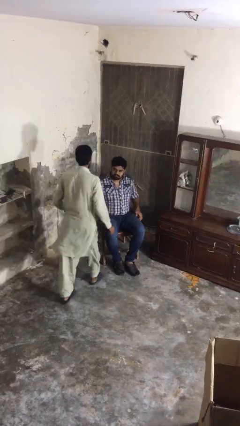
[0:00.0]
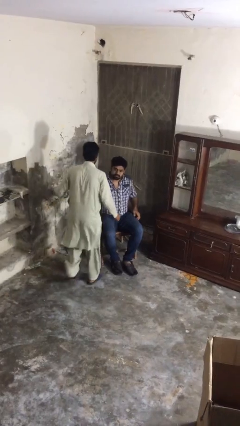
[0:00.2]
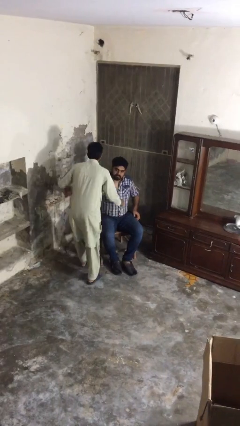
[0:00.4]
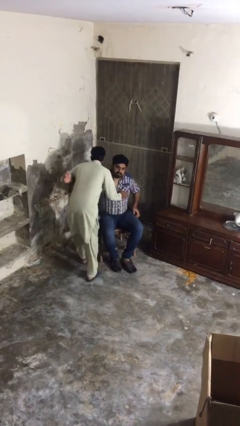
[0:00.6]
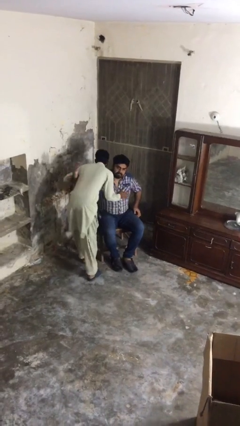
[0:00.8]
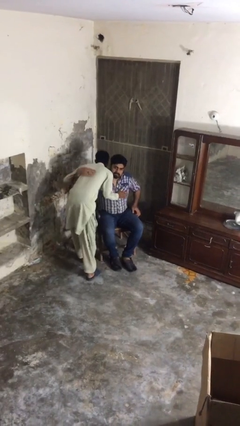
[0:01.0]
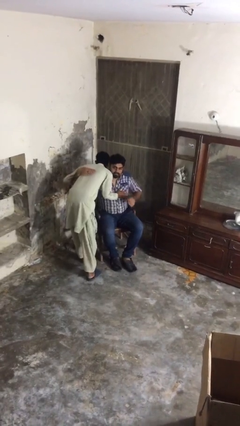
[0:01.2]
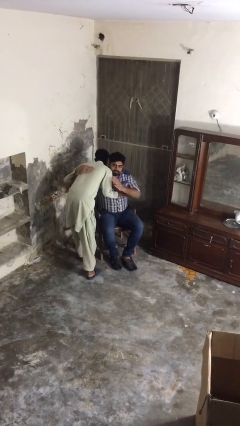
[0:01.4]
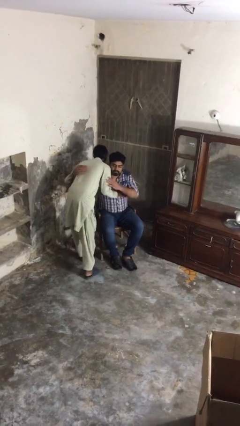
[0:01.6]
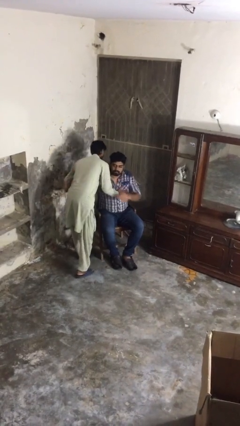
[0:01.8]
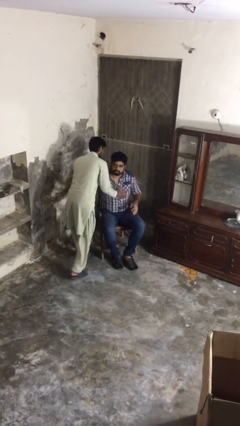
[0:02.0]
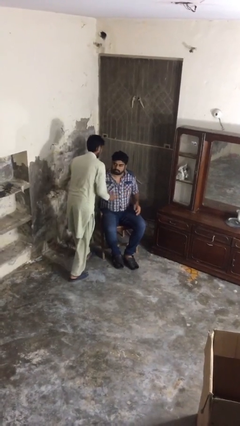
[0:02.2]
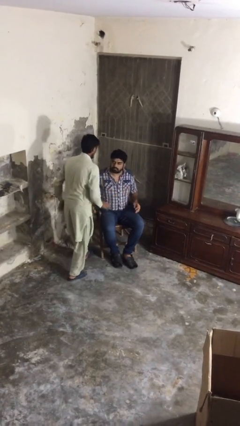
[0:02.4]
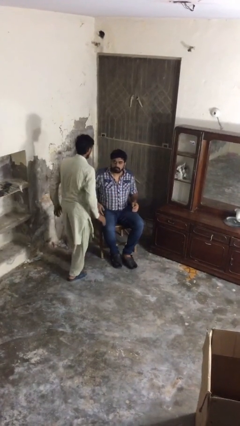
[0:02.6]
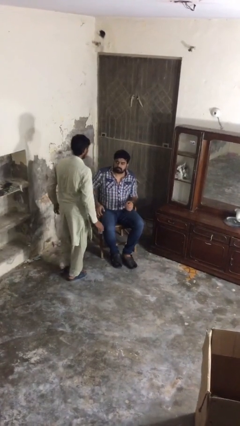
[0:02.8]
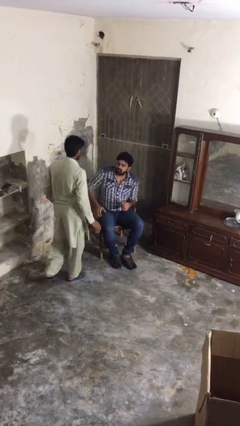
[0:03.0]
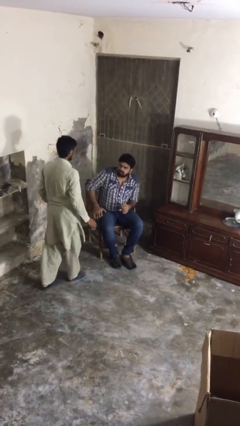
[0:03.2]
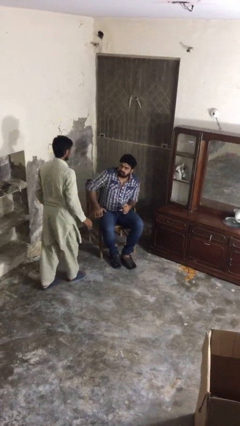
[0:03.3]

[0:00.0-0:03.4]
person embraces person

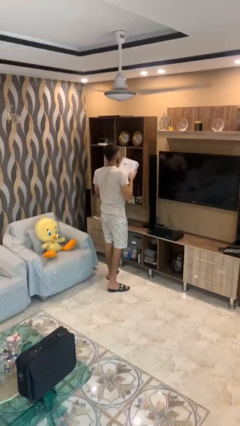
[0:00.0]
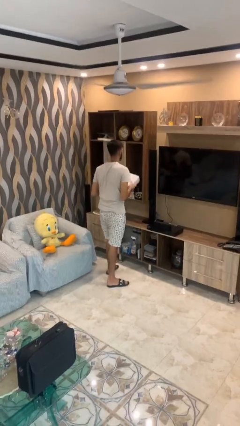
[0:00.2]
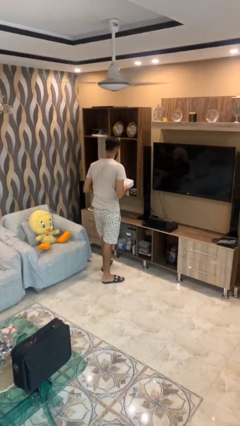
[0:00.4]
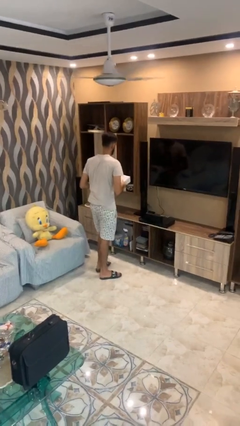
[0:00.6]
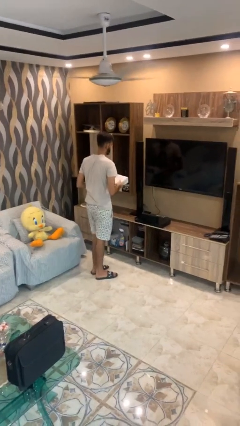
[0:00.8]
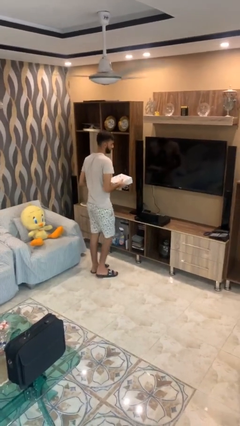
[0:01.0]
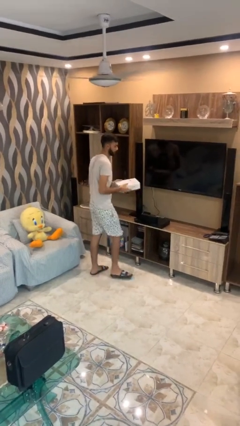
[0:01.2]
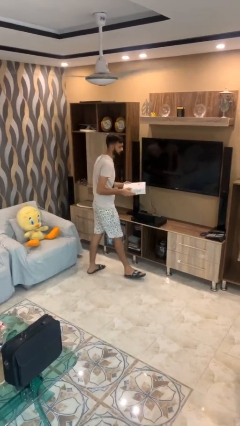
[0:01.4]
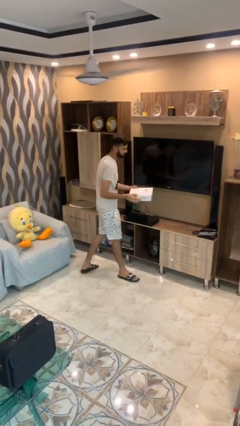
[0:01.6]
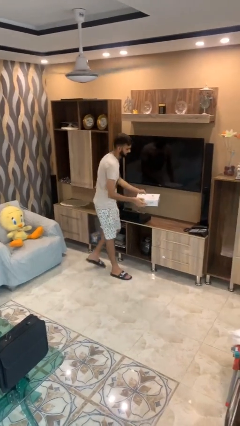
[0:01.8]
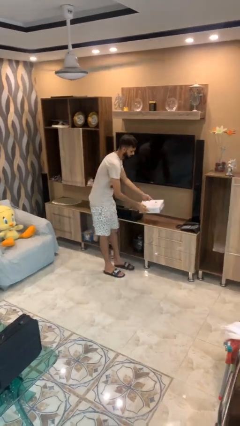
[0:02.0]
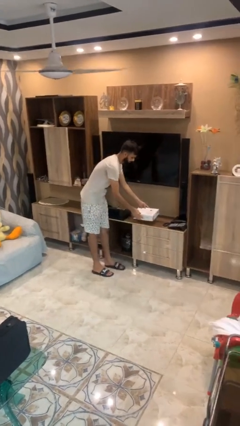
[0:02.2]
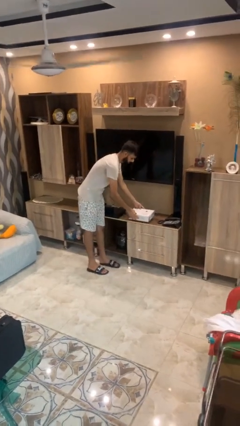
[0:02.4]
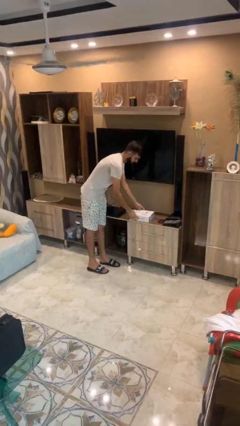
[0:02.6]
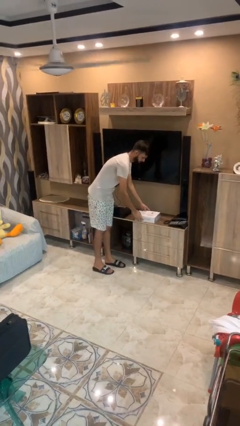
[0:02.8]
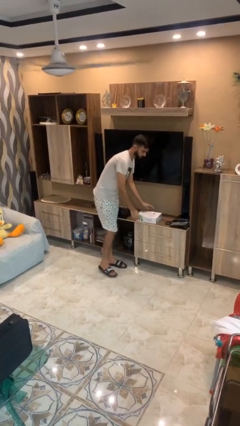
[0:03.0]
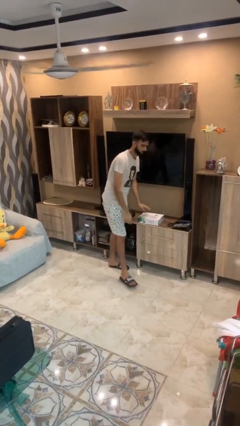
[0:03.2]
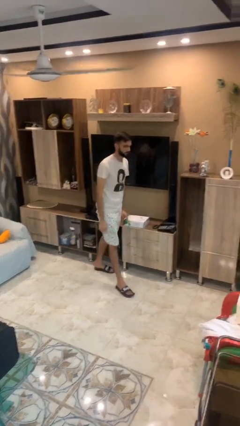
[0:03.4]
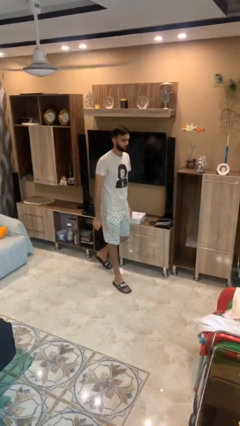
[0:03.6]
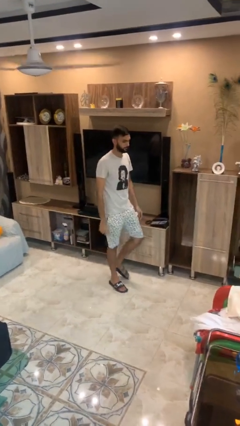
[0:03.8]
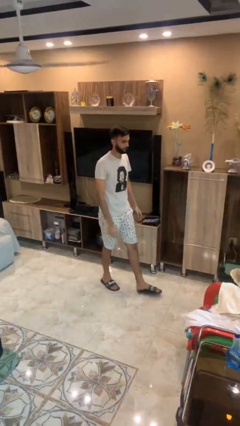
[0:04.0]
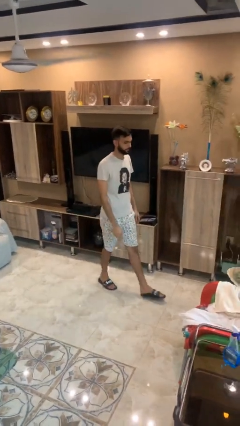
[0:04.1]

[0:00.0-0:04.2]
person puts down object on table

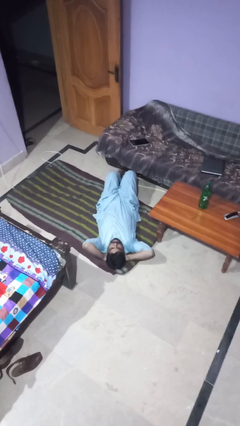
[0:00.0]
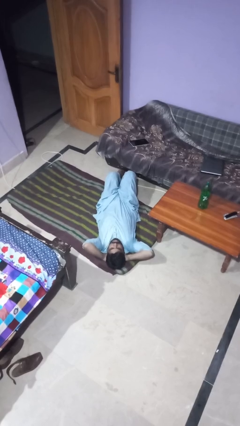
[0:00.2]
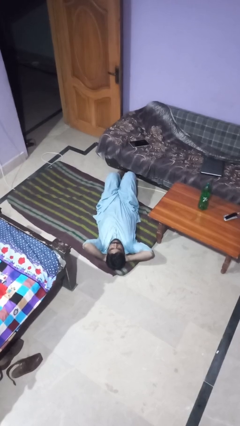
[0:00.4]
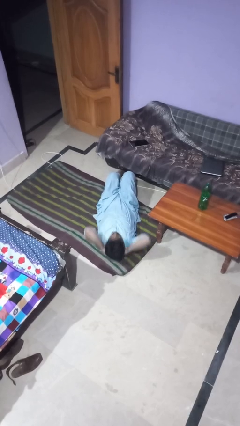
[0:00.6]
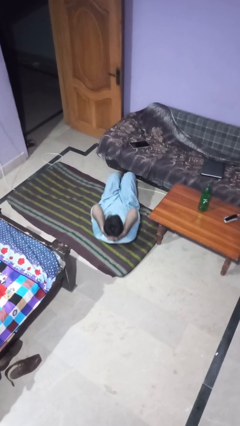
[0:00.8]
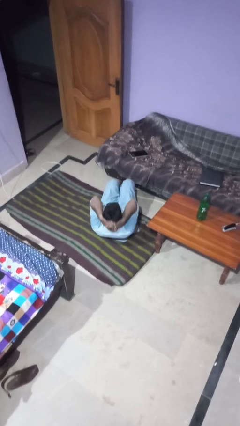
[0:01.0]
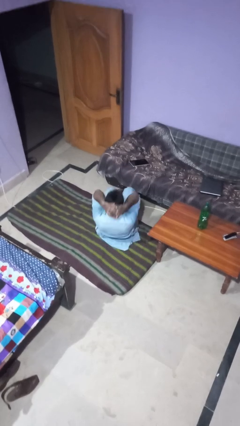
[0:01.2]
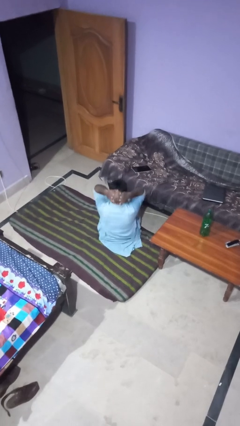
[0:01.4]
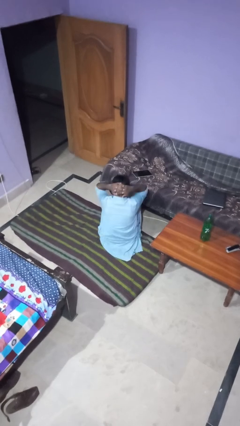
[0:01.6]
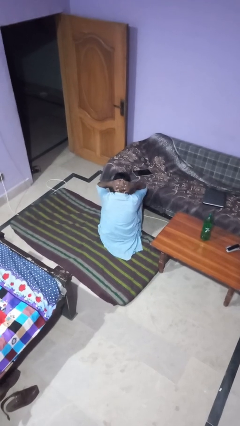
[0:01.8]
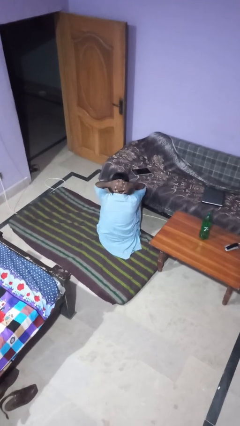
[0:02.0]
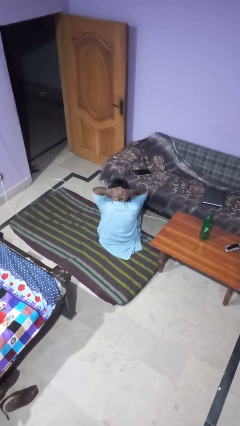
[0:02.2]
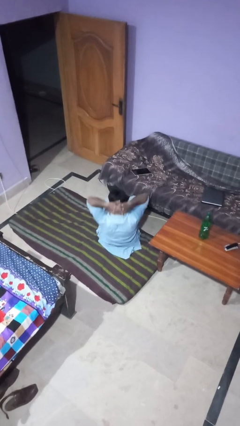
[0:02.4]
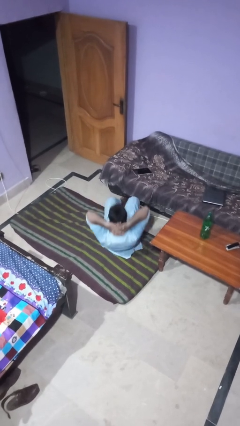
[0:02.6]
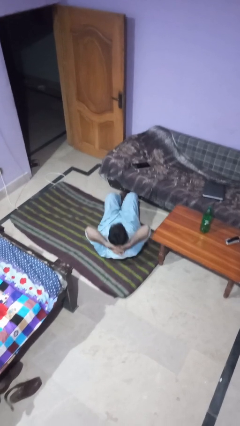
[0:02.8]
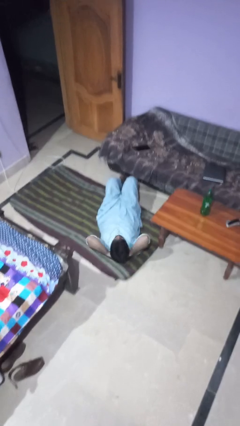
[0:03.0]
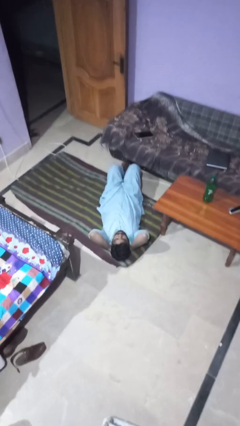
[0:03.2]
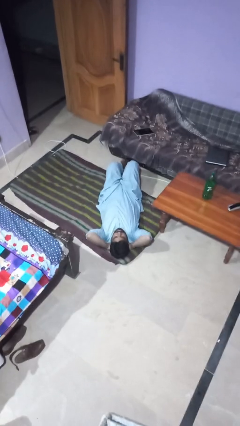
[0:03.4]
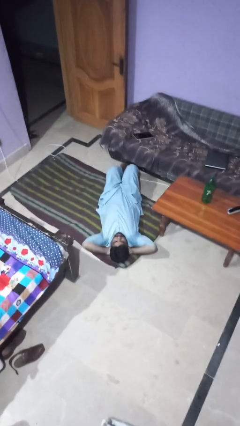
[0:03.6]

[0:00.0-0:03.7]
person exercises with situp

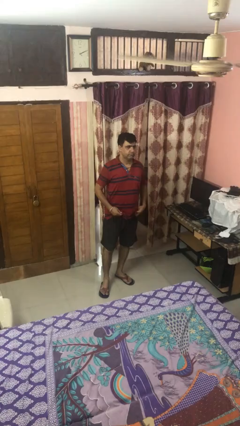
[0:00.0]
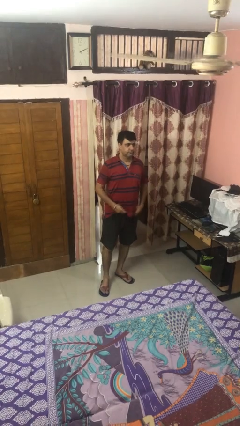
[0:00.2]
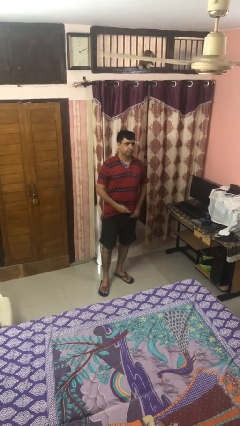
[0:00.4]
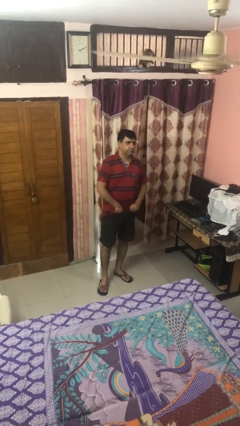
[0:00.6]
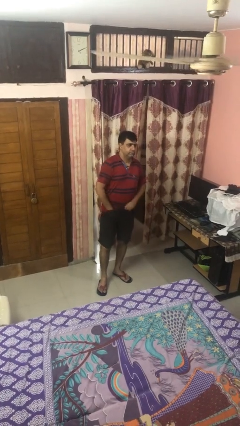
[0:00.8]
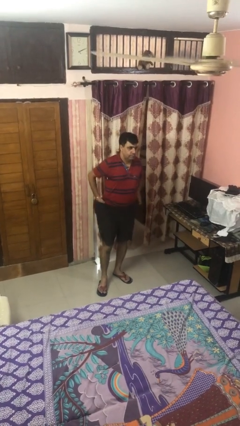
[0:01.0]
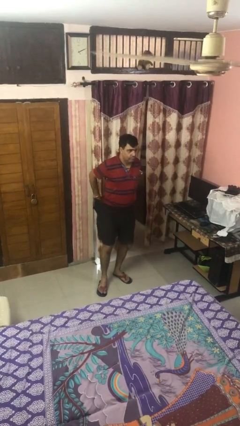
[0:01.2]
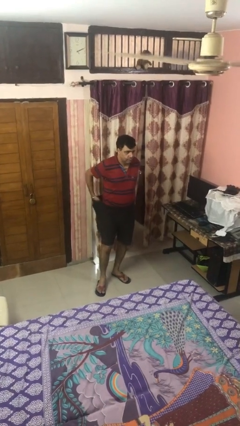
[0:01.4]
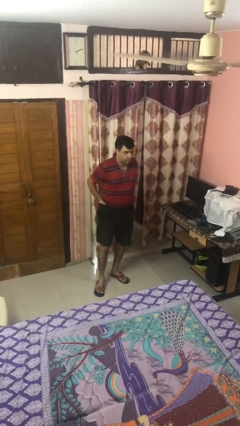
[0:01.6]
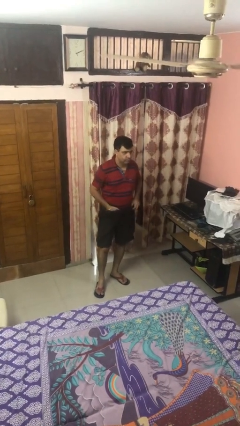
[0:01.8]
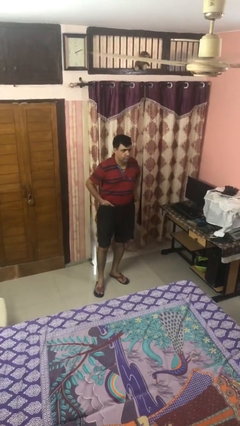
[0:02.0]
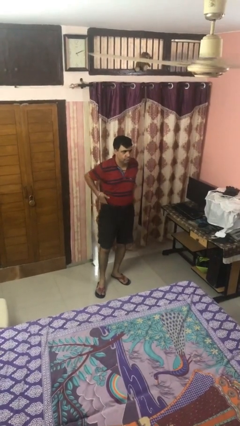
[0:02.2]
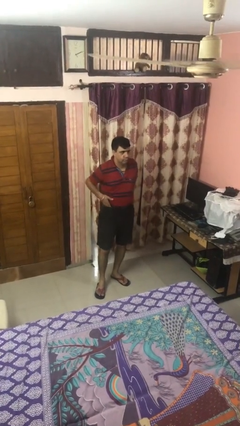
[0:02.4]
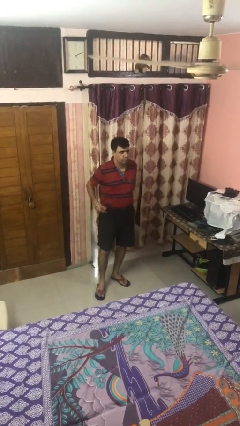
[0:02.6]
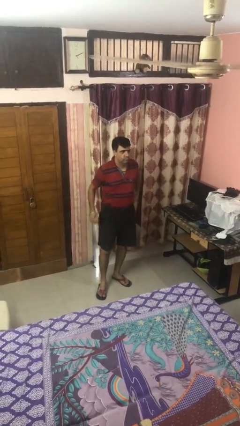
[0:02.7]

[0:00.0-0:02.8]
person tucks in shirt

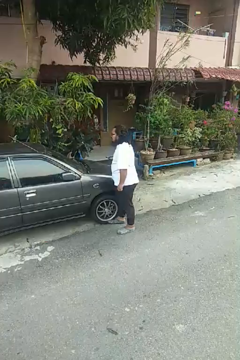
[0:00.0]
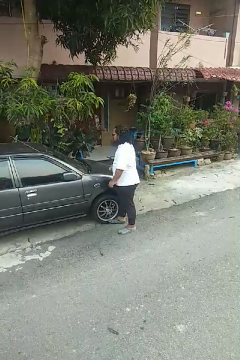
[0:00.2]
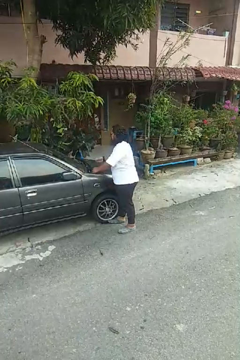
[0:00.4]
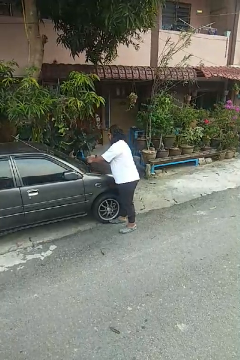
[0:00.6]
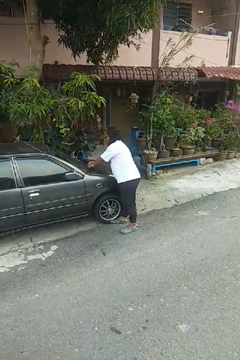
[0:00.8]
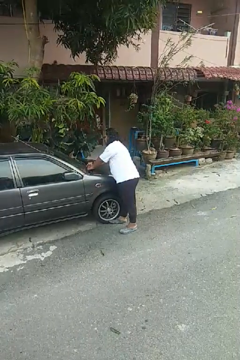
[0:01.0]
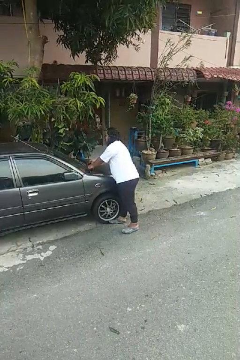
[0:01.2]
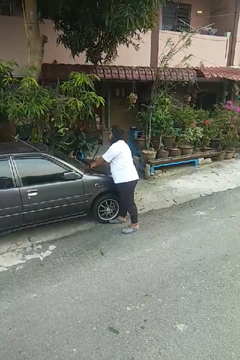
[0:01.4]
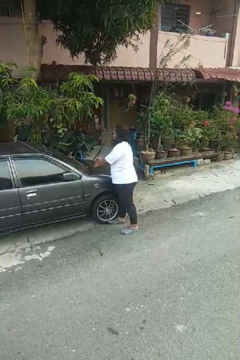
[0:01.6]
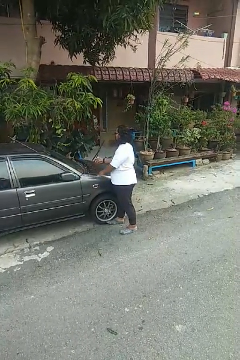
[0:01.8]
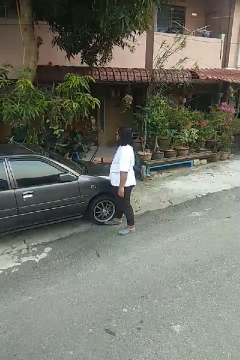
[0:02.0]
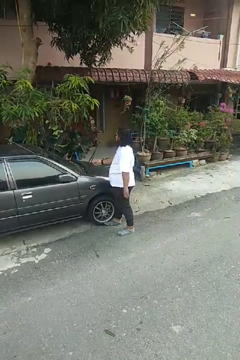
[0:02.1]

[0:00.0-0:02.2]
person flips up car wipers

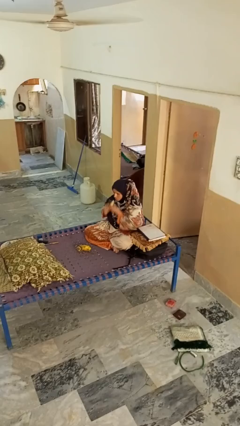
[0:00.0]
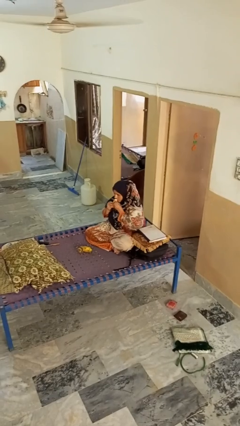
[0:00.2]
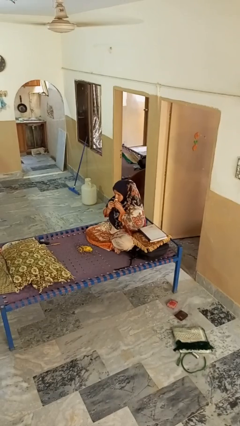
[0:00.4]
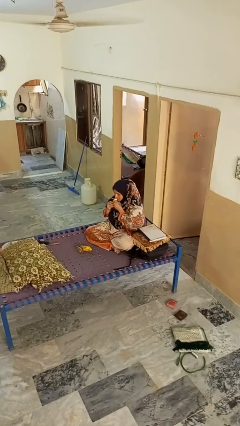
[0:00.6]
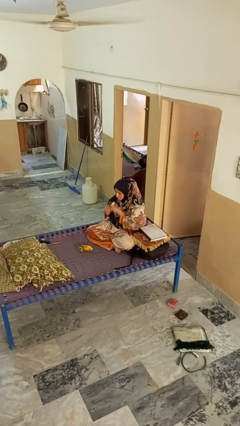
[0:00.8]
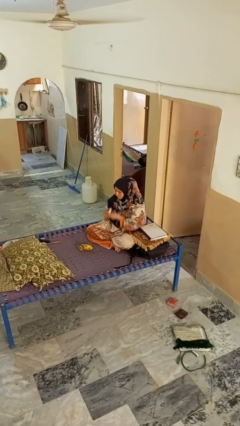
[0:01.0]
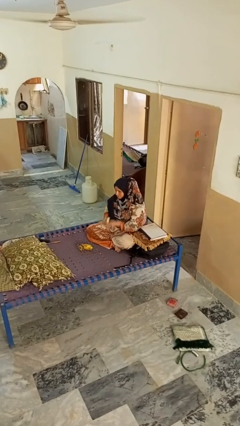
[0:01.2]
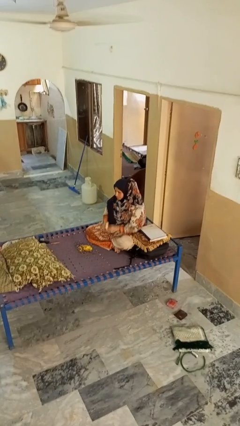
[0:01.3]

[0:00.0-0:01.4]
person eats banana
